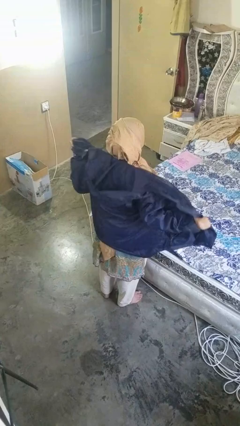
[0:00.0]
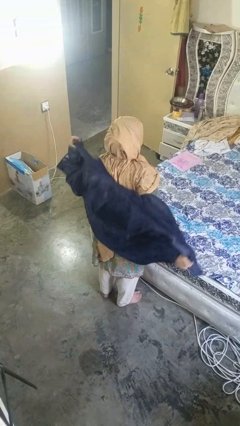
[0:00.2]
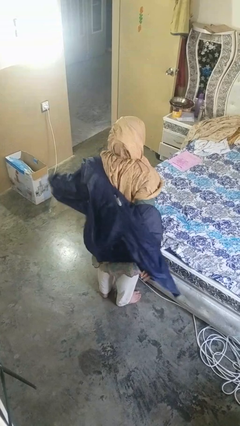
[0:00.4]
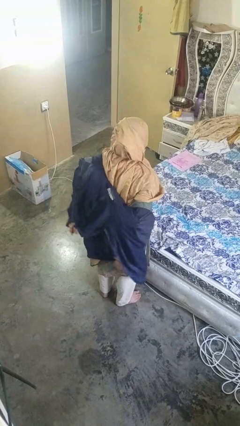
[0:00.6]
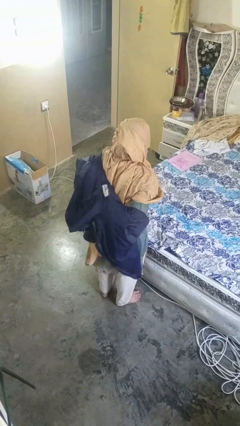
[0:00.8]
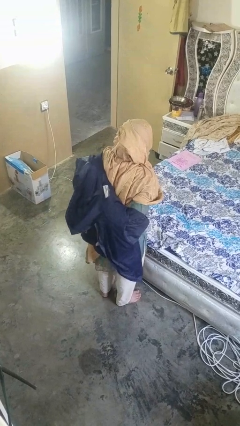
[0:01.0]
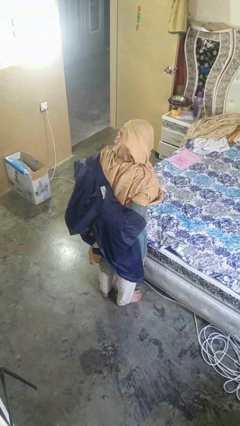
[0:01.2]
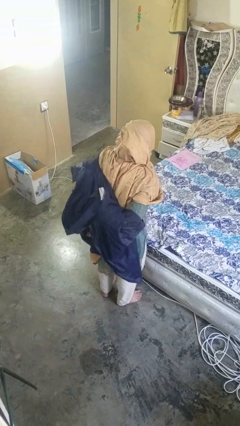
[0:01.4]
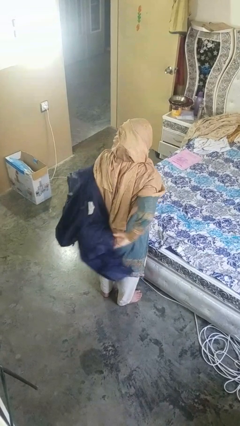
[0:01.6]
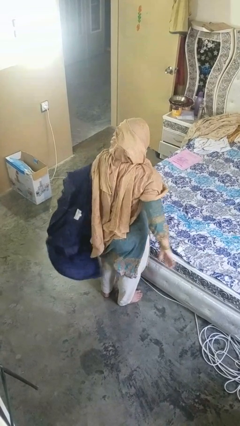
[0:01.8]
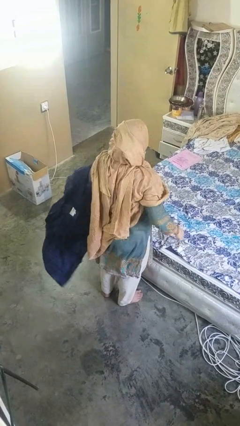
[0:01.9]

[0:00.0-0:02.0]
person takes off jacket

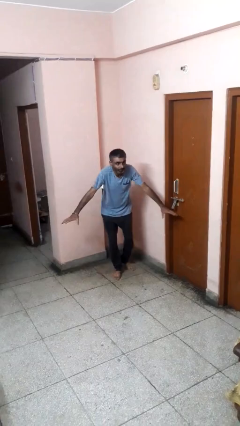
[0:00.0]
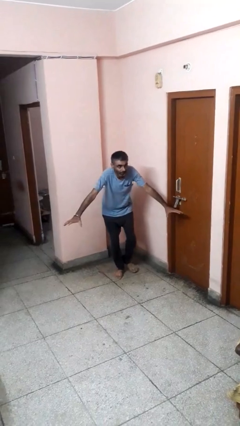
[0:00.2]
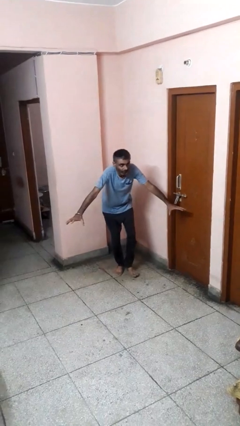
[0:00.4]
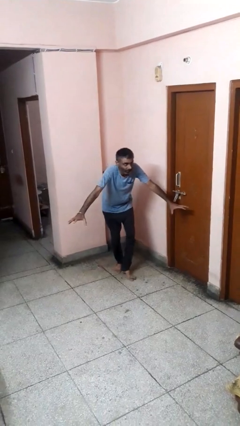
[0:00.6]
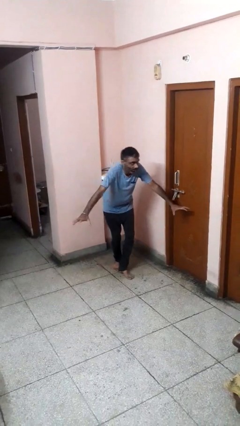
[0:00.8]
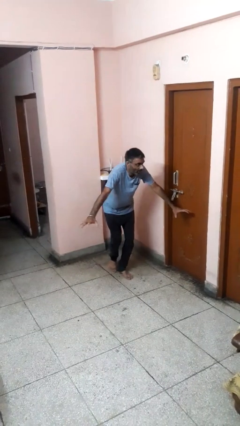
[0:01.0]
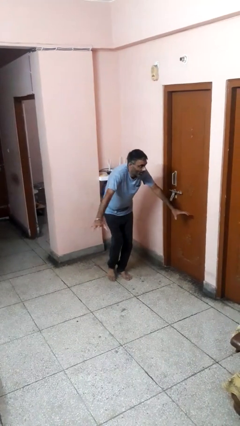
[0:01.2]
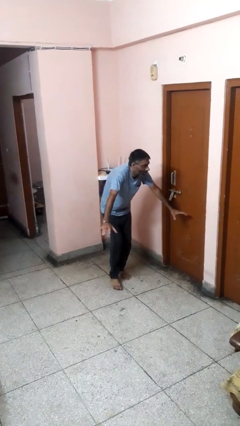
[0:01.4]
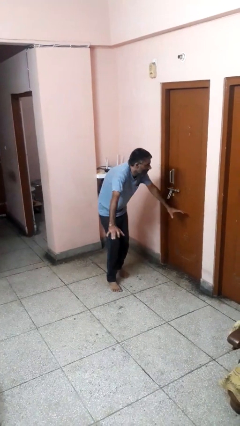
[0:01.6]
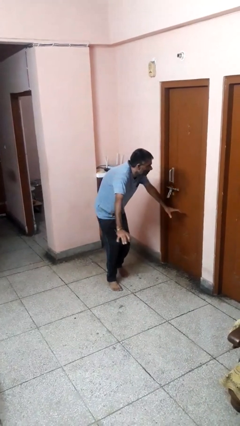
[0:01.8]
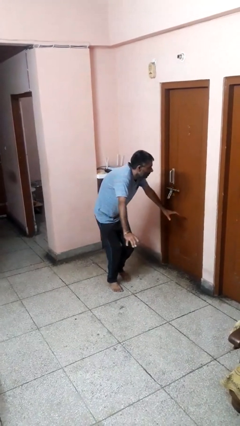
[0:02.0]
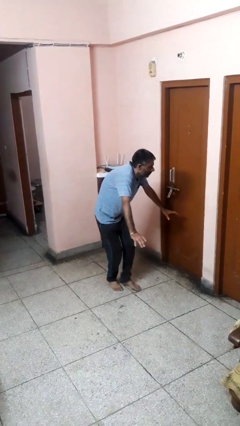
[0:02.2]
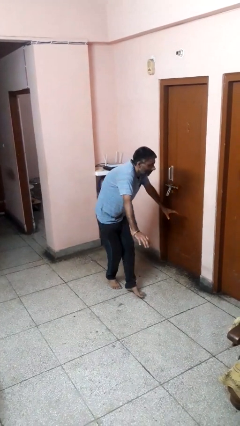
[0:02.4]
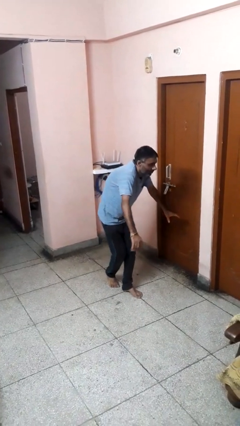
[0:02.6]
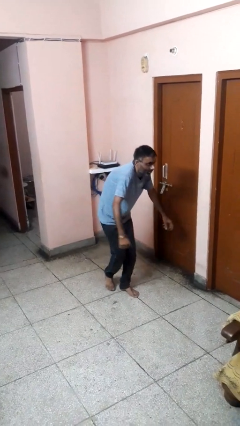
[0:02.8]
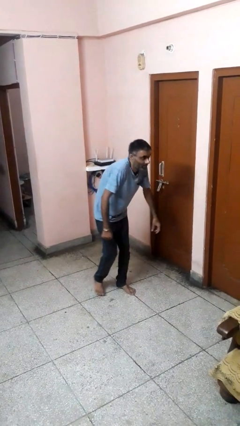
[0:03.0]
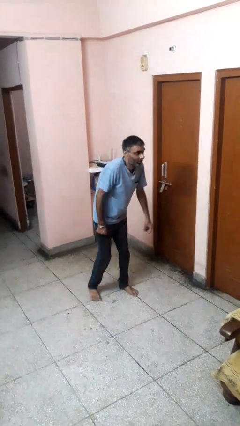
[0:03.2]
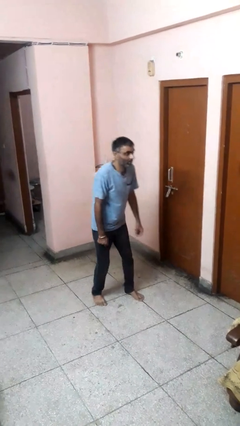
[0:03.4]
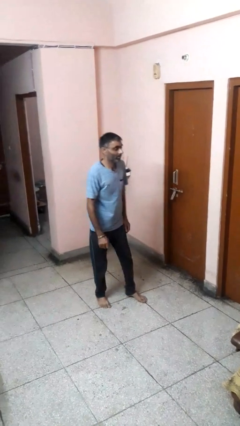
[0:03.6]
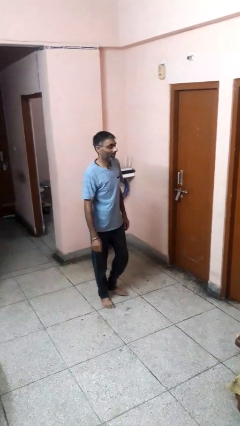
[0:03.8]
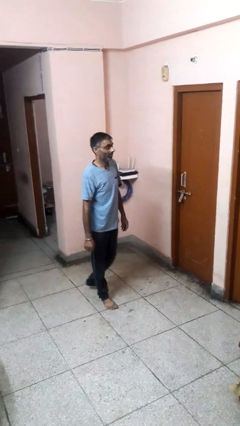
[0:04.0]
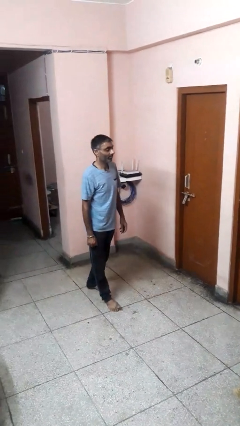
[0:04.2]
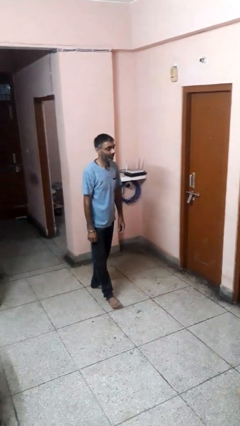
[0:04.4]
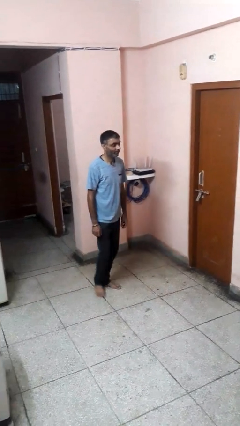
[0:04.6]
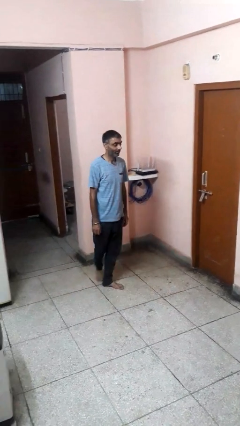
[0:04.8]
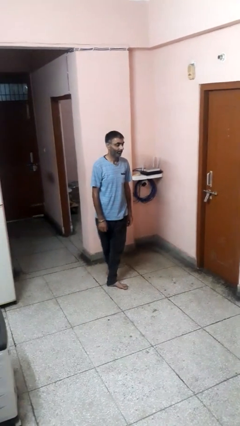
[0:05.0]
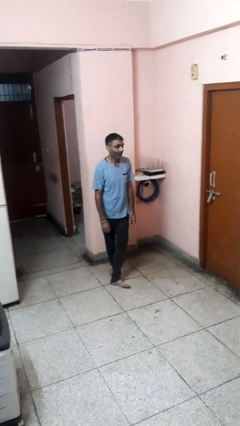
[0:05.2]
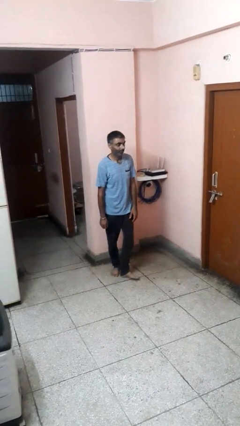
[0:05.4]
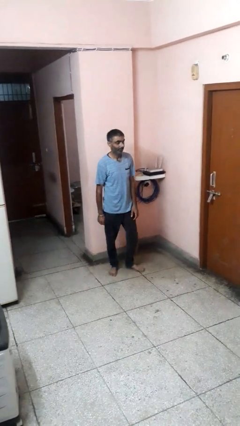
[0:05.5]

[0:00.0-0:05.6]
person walks tiptoe

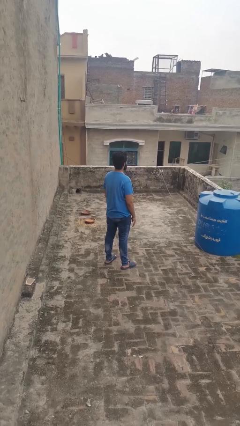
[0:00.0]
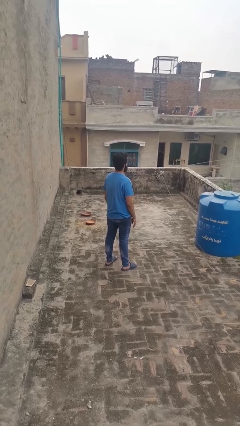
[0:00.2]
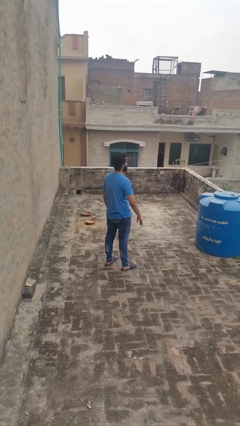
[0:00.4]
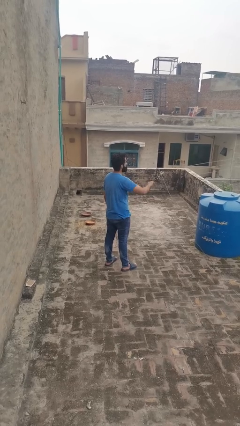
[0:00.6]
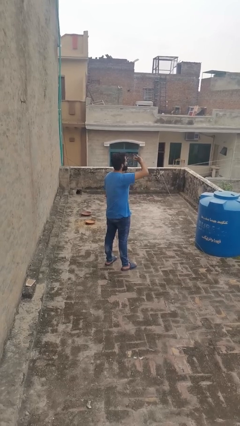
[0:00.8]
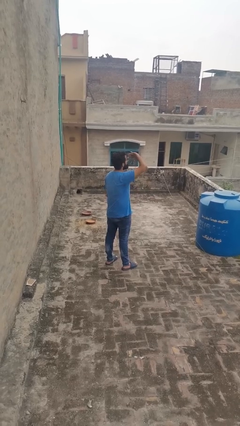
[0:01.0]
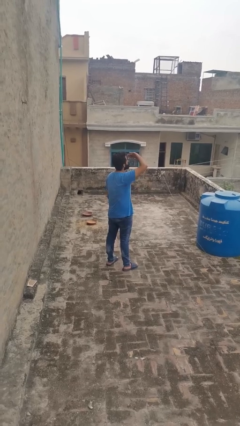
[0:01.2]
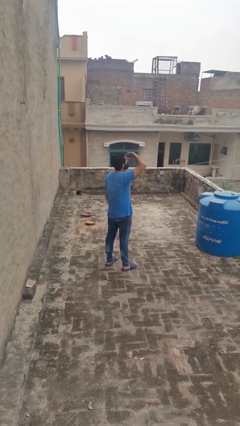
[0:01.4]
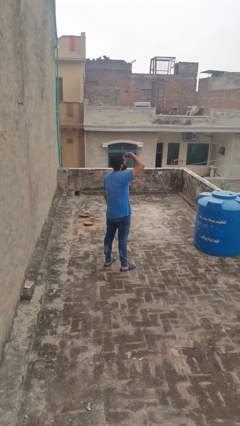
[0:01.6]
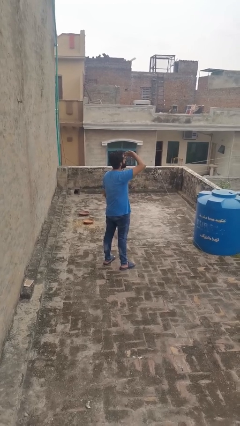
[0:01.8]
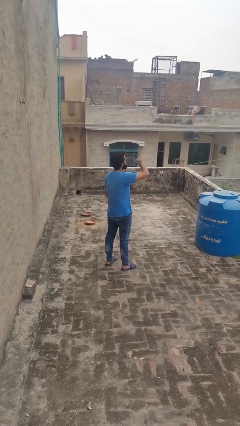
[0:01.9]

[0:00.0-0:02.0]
person shades eyes

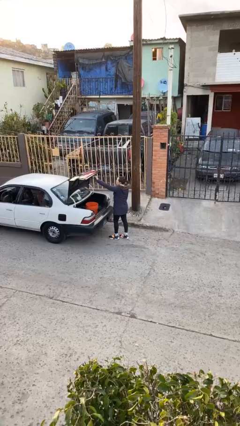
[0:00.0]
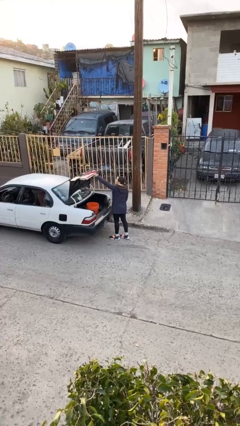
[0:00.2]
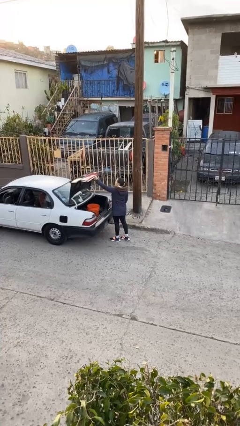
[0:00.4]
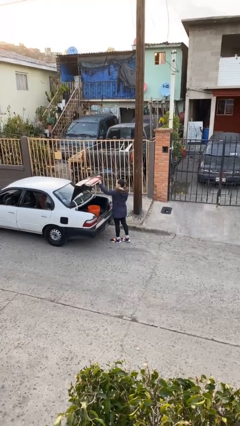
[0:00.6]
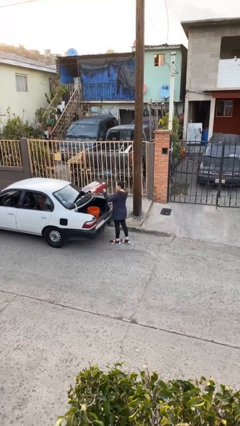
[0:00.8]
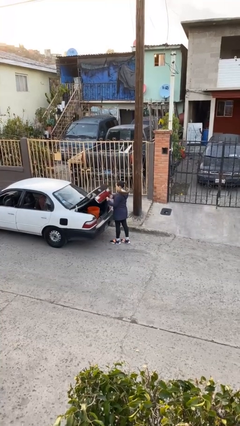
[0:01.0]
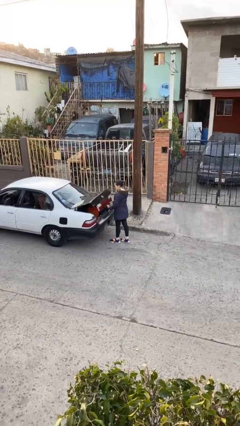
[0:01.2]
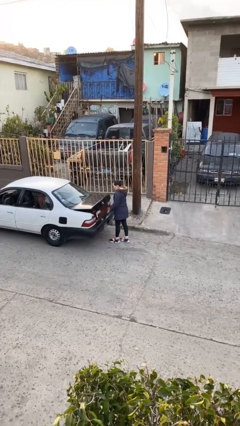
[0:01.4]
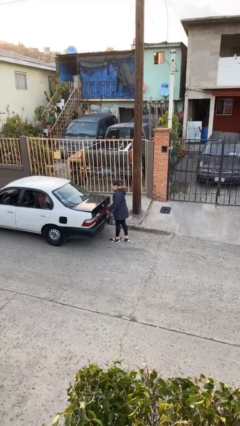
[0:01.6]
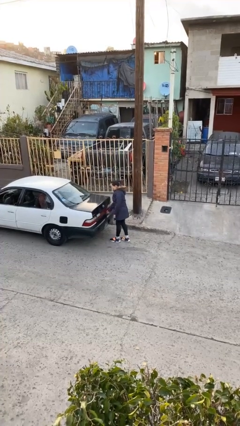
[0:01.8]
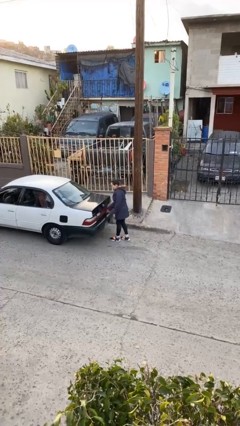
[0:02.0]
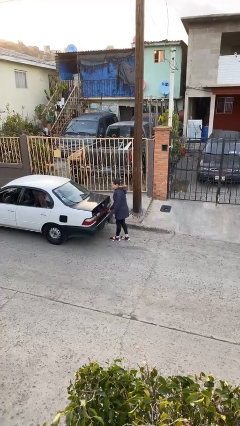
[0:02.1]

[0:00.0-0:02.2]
person closes car trunk

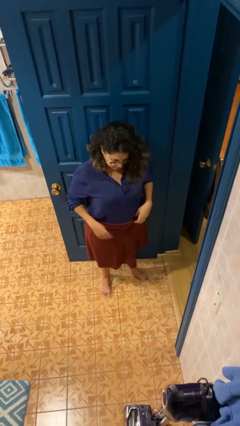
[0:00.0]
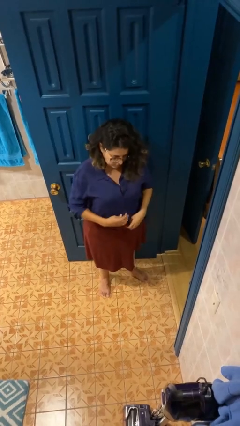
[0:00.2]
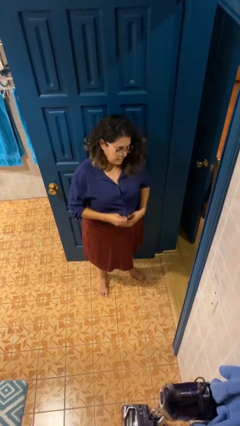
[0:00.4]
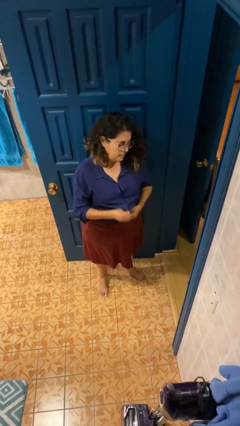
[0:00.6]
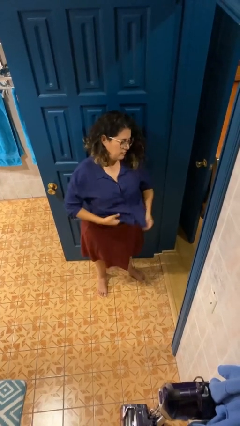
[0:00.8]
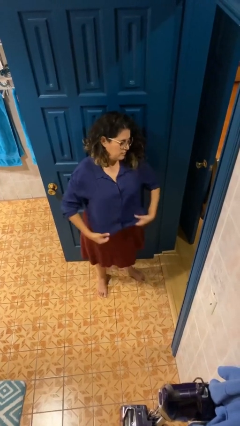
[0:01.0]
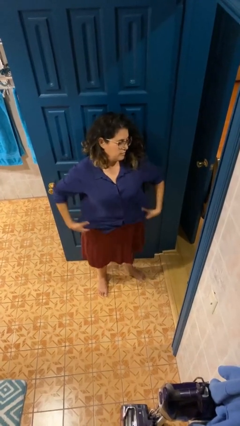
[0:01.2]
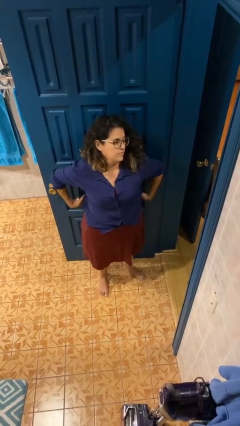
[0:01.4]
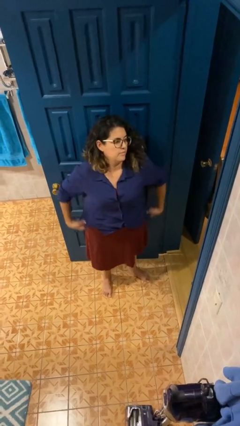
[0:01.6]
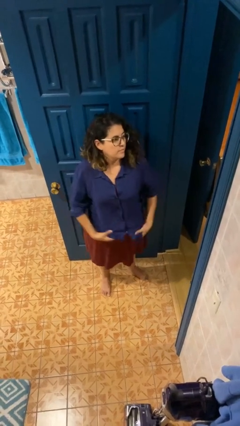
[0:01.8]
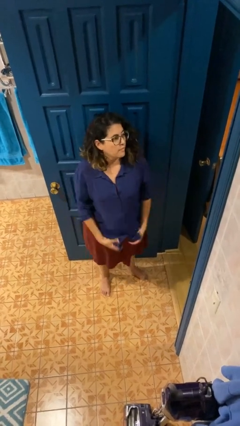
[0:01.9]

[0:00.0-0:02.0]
person untucks shirt

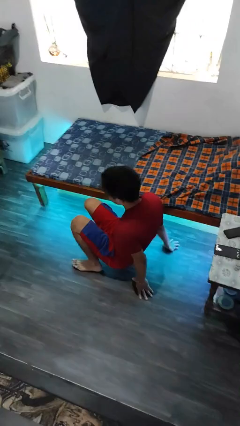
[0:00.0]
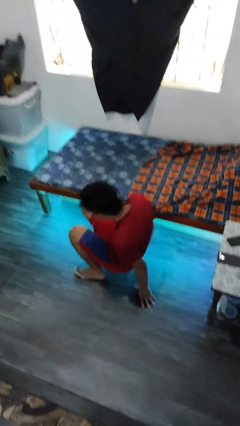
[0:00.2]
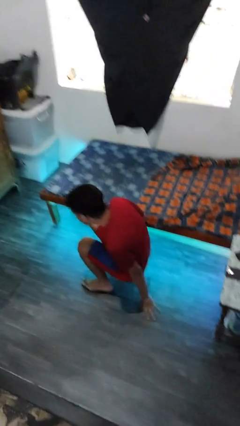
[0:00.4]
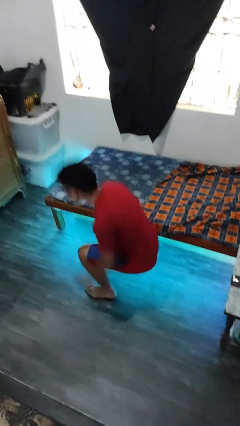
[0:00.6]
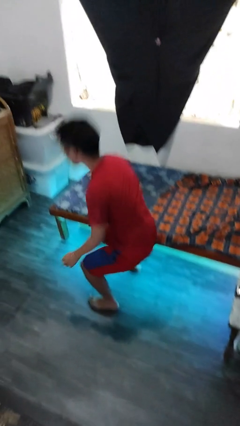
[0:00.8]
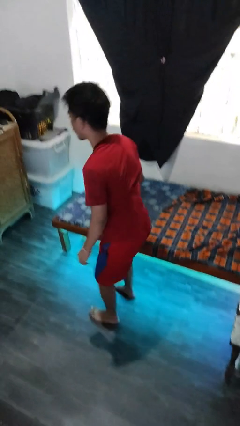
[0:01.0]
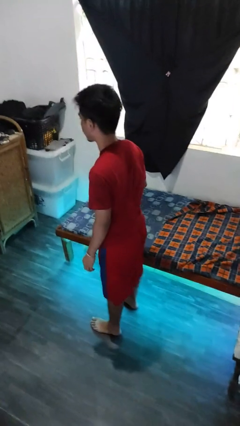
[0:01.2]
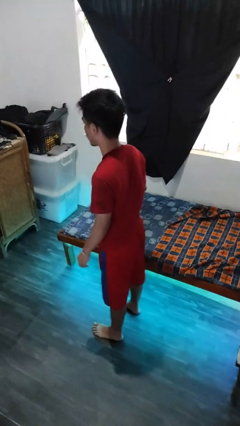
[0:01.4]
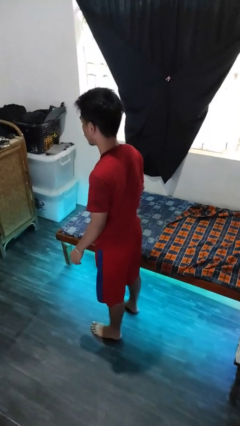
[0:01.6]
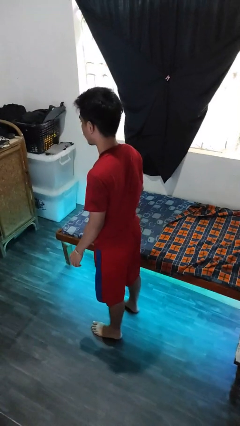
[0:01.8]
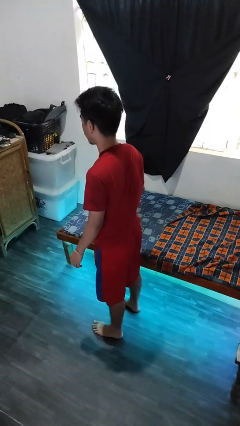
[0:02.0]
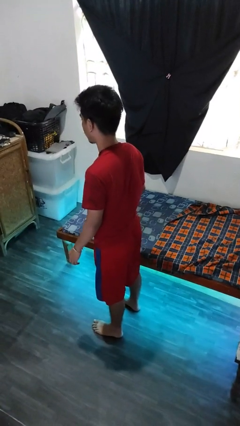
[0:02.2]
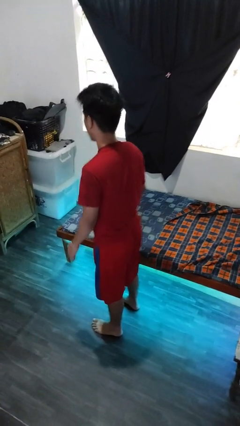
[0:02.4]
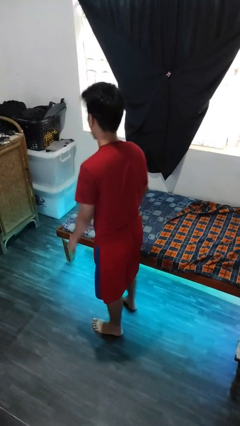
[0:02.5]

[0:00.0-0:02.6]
person stands up from floor

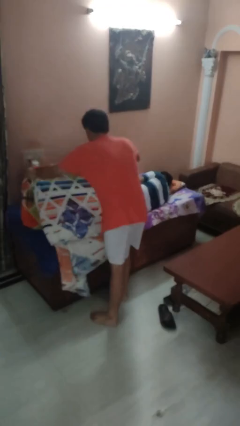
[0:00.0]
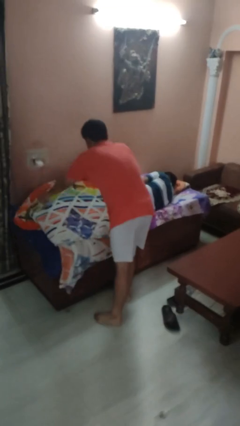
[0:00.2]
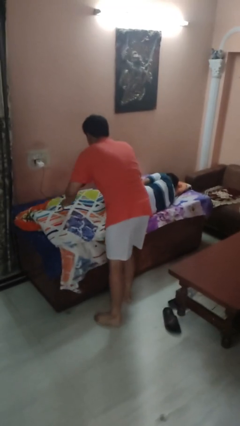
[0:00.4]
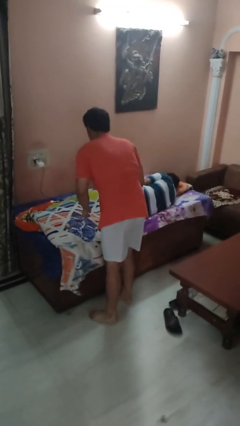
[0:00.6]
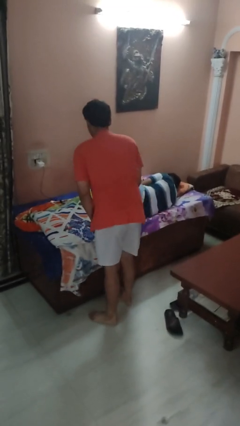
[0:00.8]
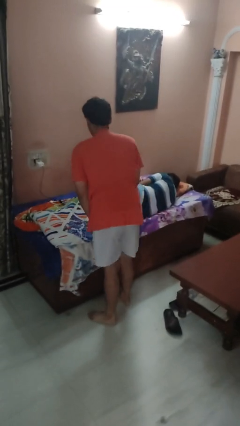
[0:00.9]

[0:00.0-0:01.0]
person covers friend with blanket
